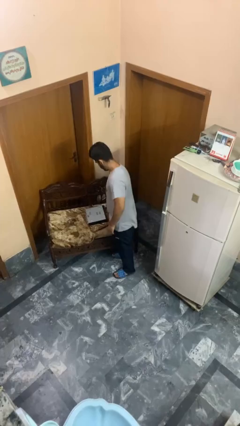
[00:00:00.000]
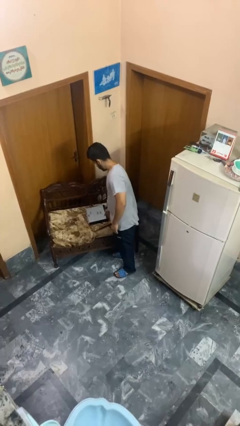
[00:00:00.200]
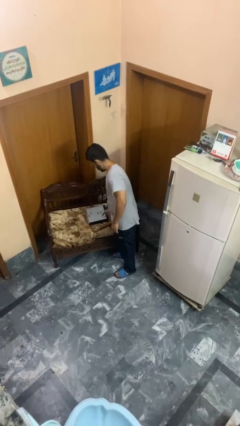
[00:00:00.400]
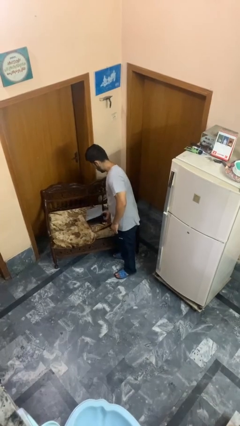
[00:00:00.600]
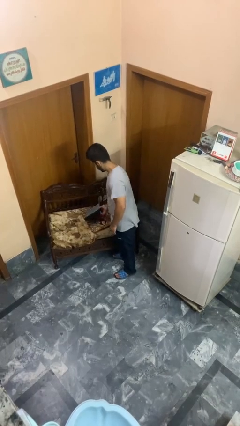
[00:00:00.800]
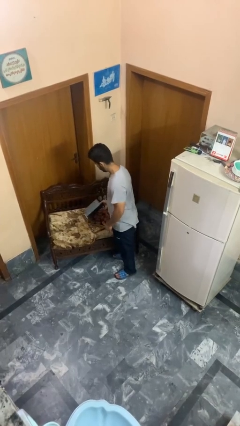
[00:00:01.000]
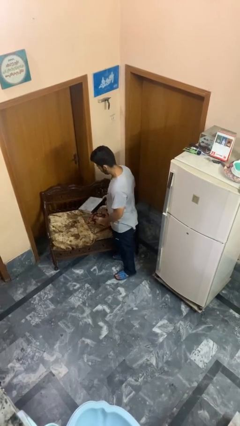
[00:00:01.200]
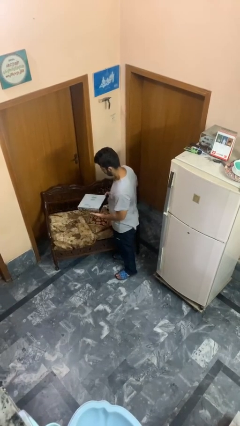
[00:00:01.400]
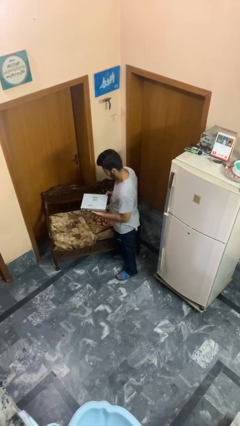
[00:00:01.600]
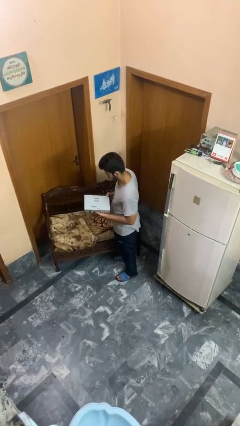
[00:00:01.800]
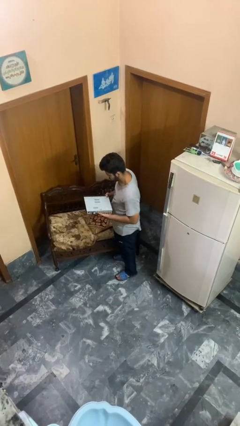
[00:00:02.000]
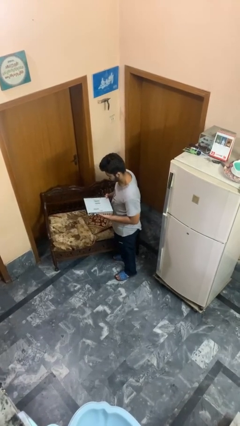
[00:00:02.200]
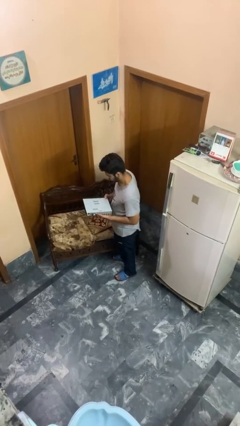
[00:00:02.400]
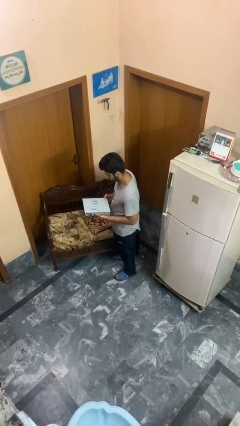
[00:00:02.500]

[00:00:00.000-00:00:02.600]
person picks up object from couch

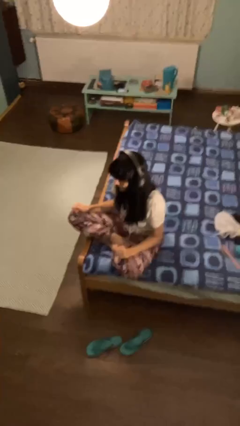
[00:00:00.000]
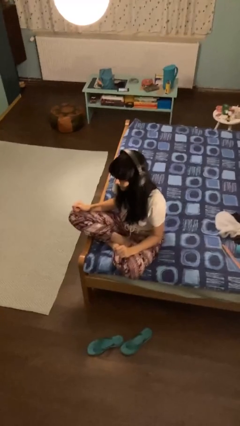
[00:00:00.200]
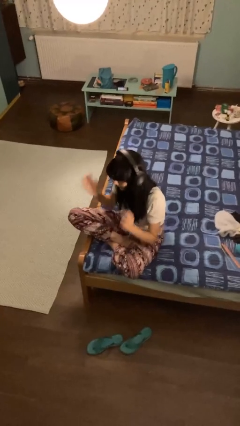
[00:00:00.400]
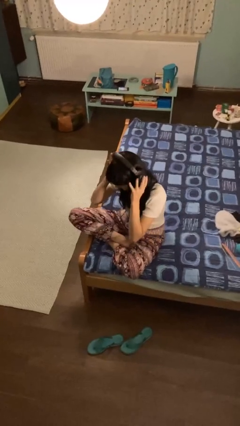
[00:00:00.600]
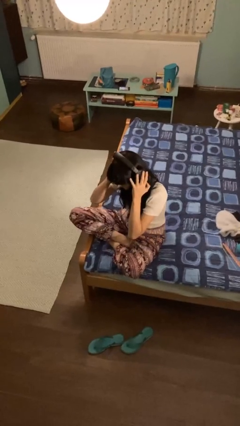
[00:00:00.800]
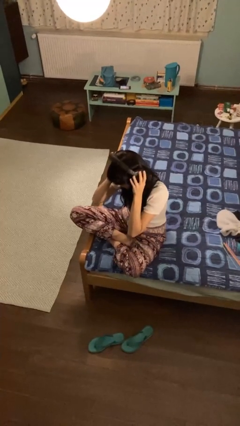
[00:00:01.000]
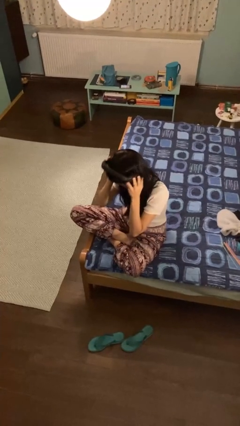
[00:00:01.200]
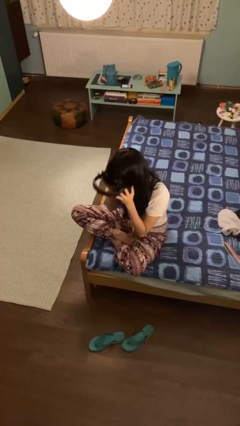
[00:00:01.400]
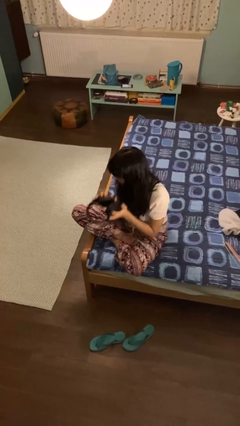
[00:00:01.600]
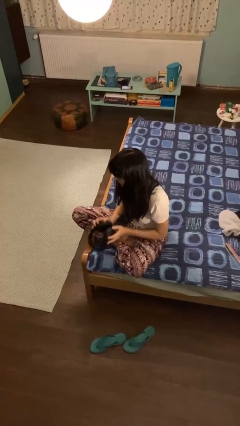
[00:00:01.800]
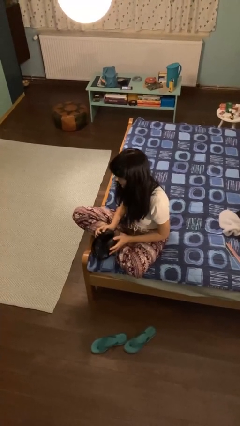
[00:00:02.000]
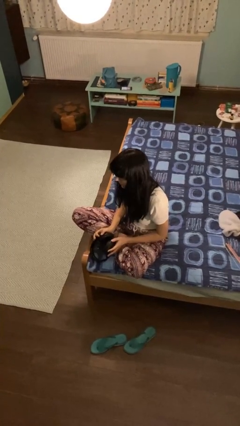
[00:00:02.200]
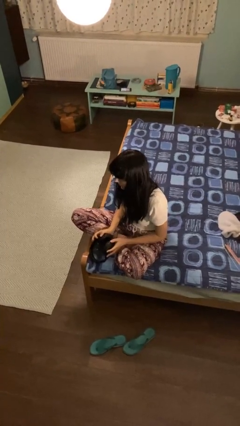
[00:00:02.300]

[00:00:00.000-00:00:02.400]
person takes off headphones

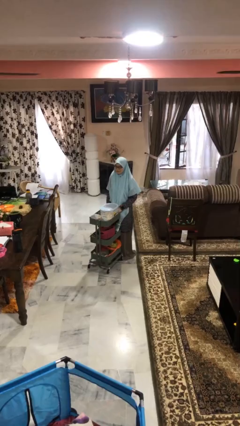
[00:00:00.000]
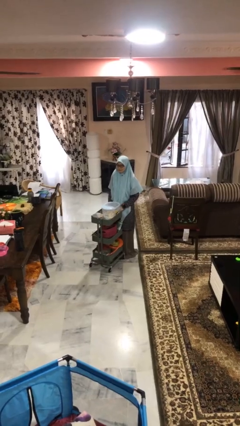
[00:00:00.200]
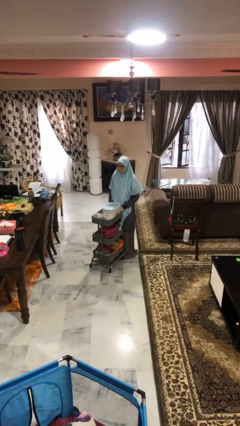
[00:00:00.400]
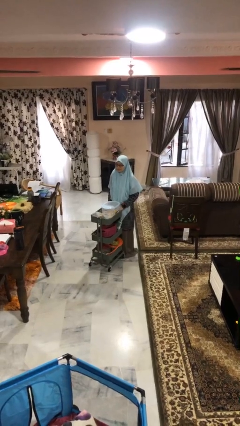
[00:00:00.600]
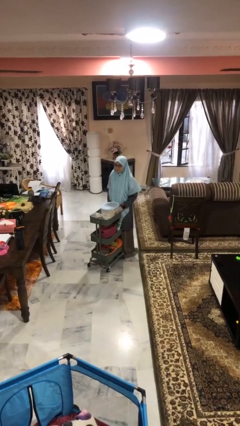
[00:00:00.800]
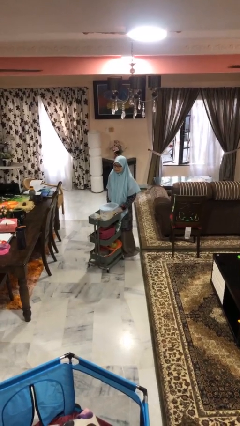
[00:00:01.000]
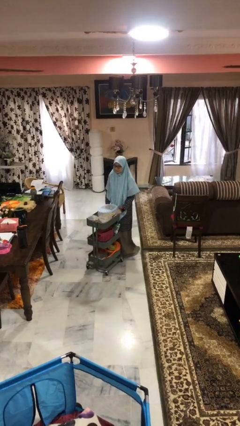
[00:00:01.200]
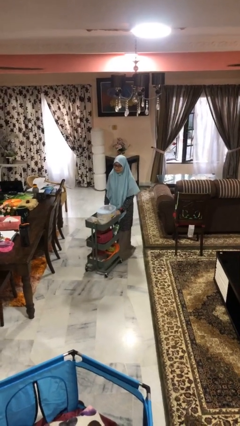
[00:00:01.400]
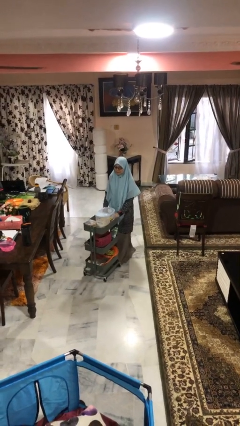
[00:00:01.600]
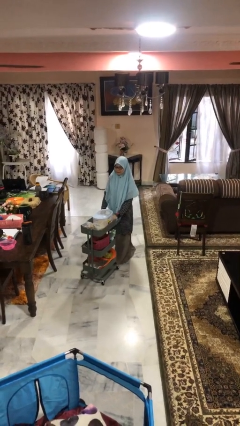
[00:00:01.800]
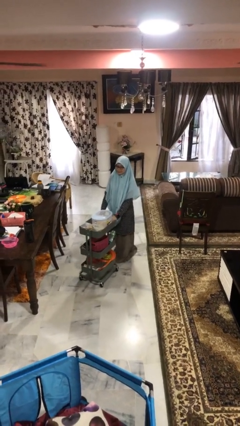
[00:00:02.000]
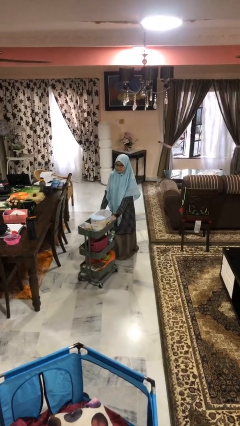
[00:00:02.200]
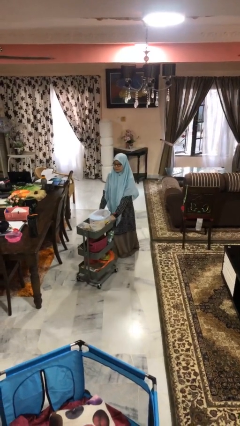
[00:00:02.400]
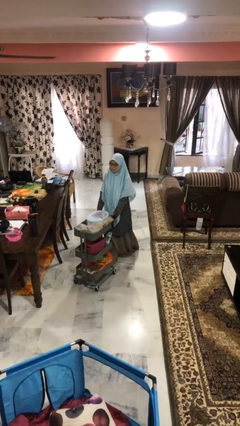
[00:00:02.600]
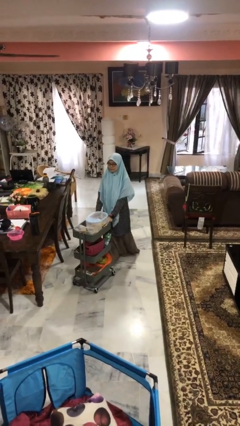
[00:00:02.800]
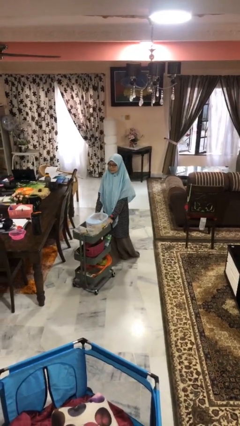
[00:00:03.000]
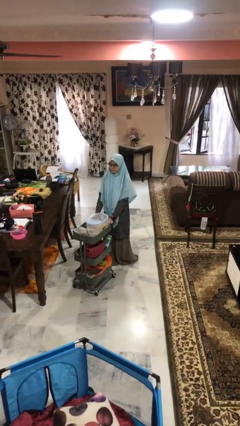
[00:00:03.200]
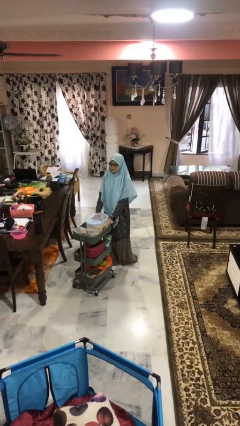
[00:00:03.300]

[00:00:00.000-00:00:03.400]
person pushes wheeled cart

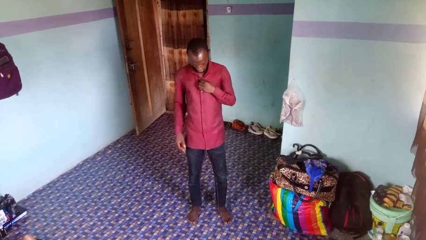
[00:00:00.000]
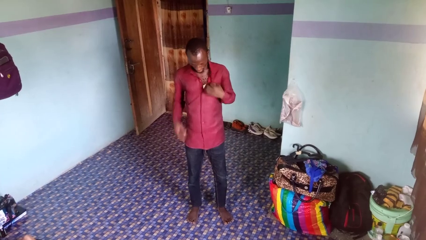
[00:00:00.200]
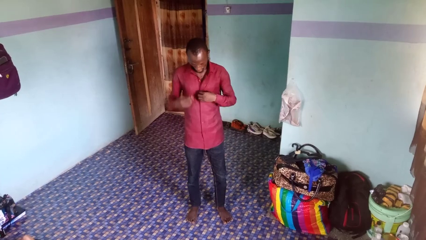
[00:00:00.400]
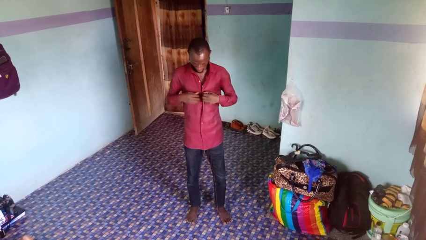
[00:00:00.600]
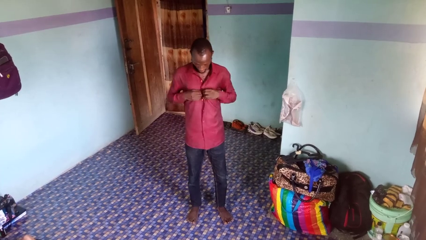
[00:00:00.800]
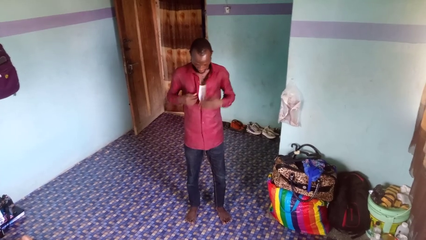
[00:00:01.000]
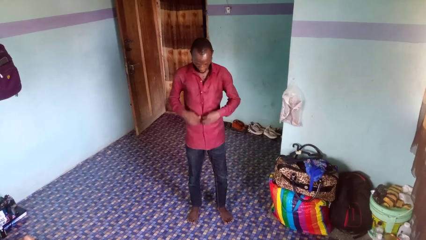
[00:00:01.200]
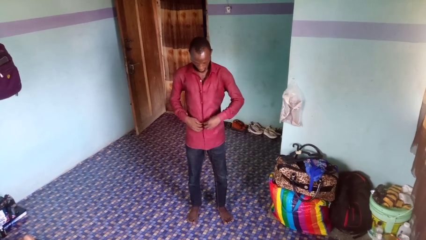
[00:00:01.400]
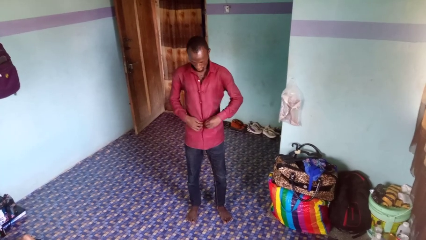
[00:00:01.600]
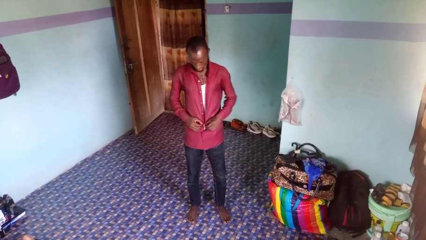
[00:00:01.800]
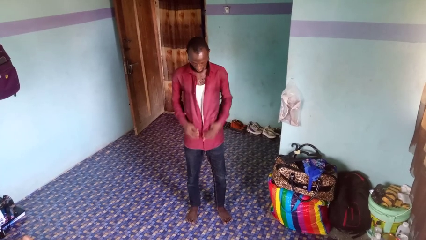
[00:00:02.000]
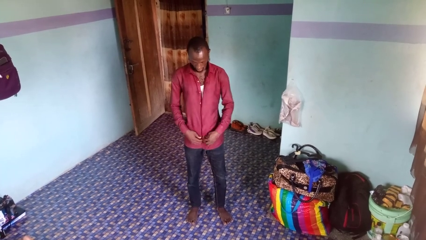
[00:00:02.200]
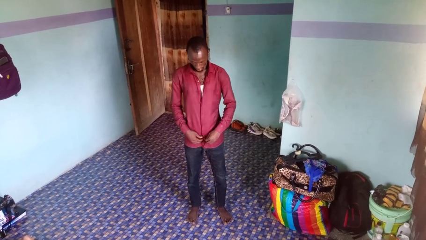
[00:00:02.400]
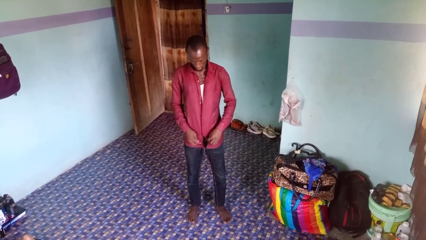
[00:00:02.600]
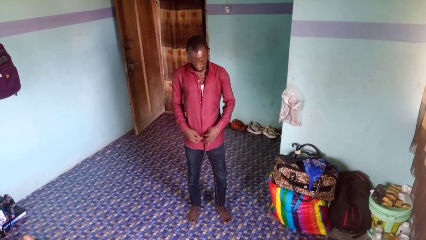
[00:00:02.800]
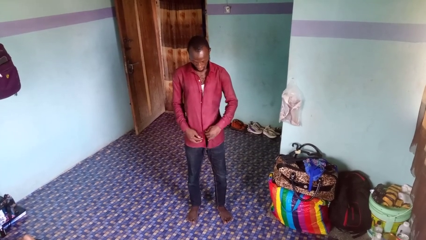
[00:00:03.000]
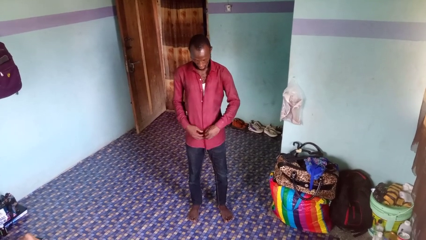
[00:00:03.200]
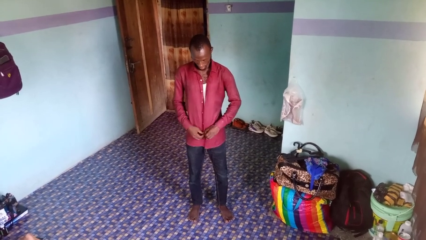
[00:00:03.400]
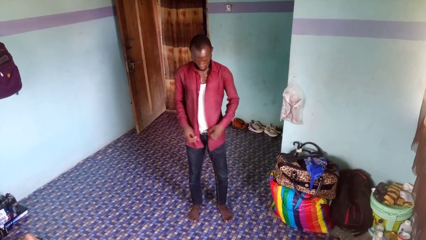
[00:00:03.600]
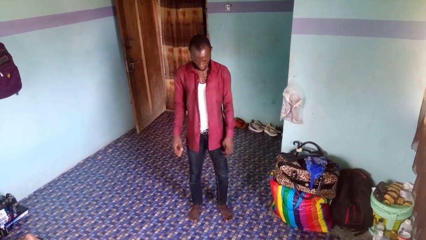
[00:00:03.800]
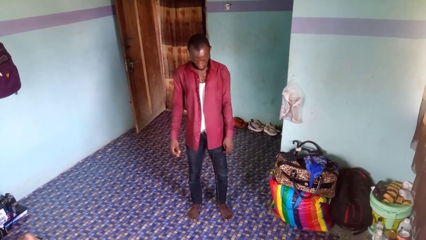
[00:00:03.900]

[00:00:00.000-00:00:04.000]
person unbuttons shirt

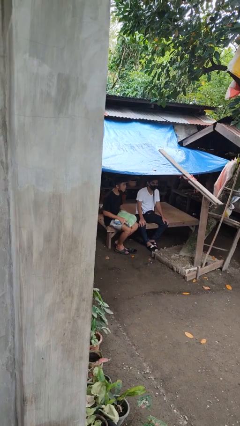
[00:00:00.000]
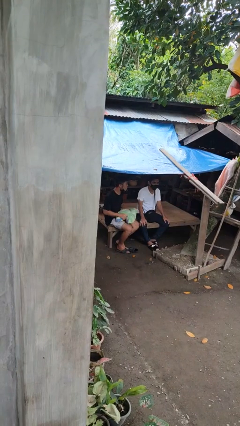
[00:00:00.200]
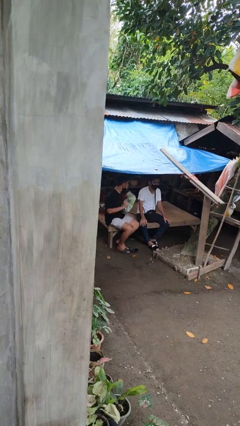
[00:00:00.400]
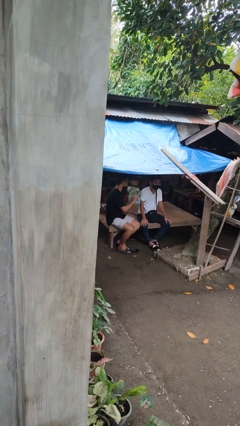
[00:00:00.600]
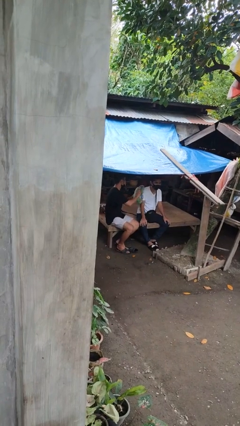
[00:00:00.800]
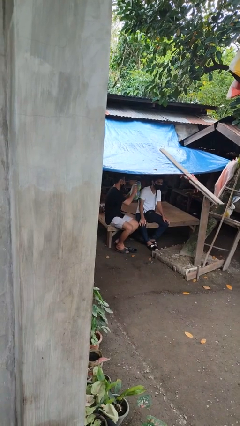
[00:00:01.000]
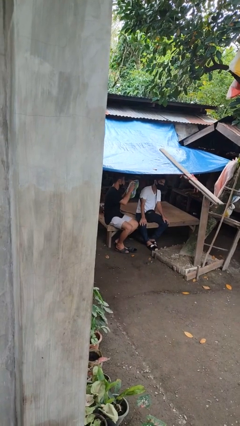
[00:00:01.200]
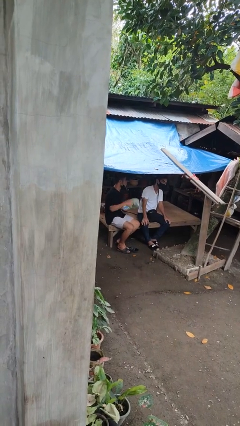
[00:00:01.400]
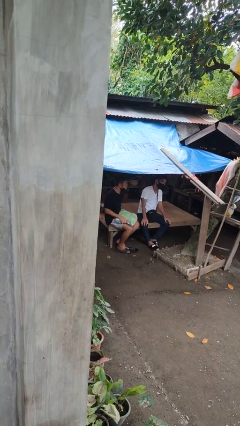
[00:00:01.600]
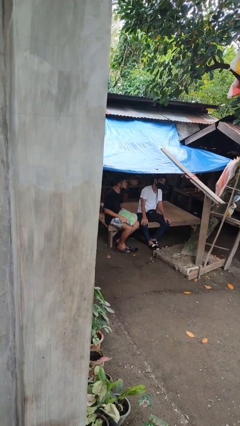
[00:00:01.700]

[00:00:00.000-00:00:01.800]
person hits person with pillow

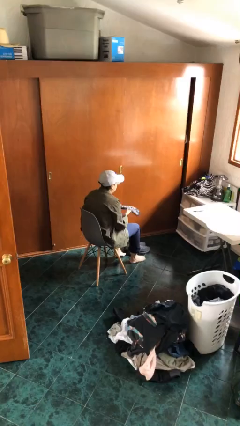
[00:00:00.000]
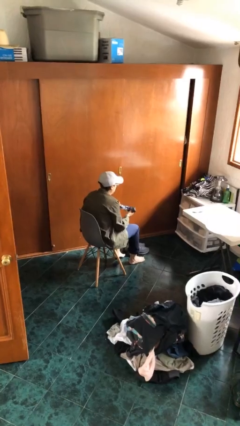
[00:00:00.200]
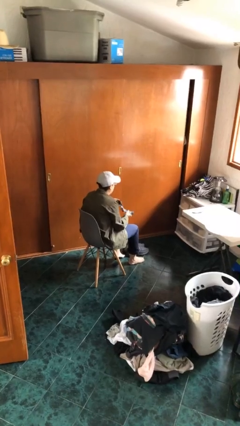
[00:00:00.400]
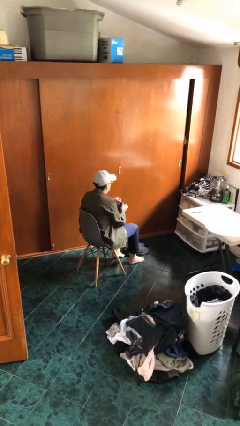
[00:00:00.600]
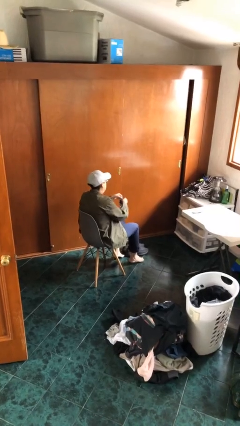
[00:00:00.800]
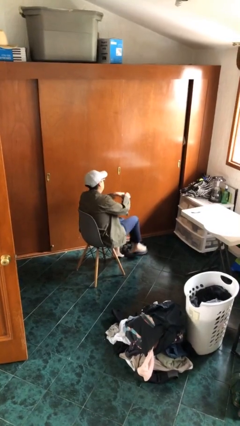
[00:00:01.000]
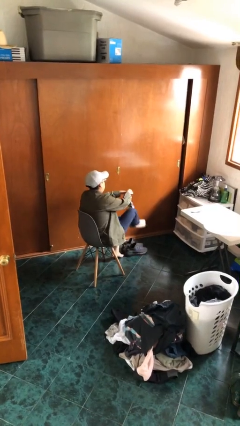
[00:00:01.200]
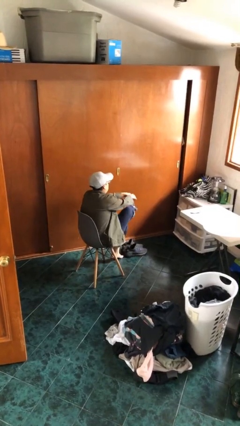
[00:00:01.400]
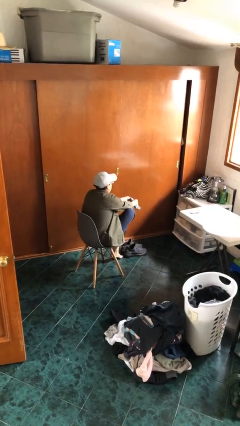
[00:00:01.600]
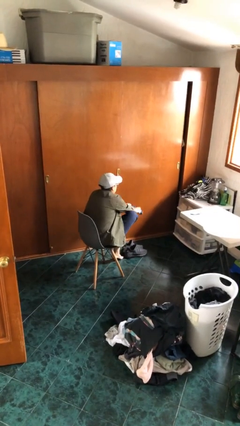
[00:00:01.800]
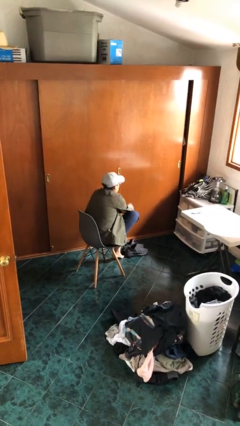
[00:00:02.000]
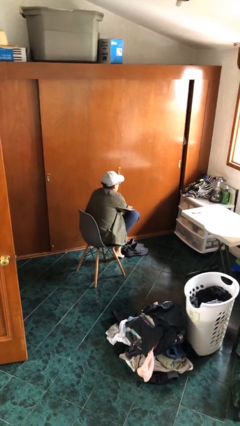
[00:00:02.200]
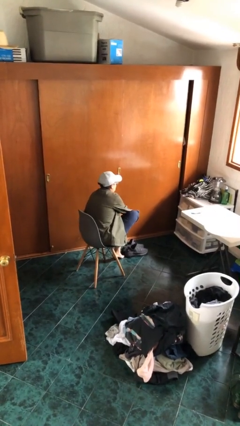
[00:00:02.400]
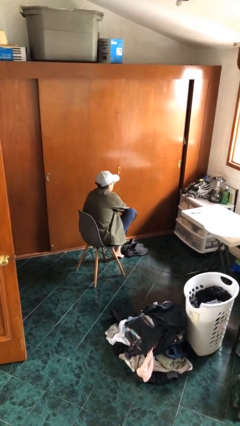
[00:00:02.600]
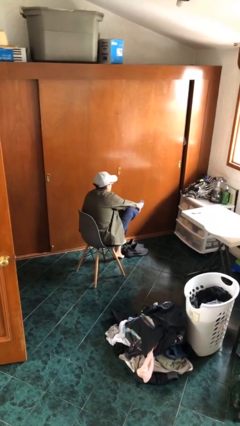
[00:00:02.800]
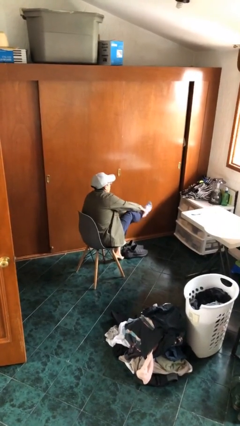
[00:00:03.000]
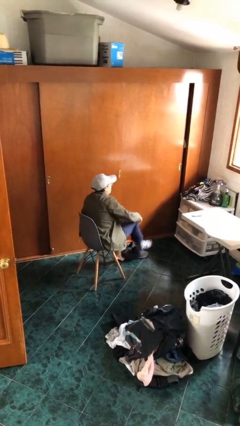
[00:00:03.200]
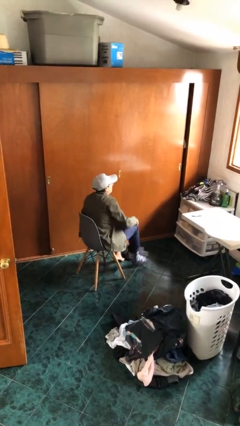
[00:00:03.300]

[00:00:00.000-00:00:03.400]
person puts on socks
